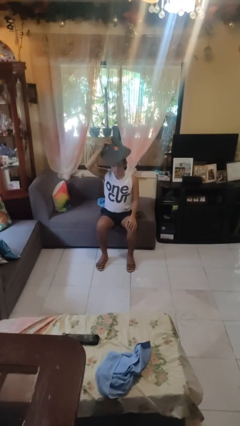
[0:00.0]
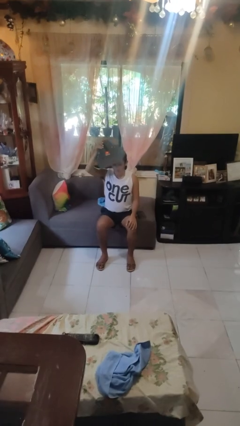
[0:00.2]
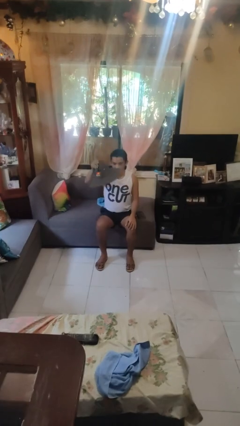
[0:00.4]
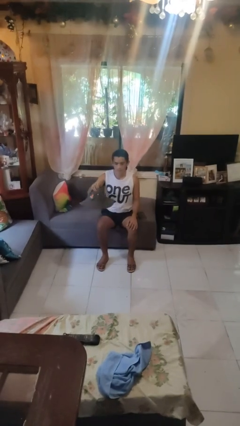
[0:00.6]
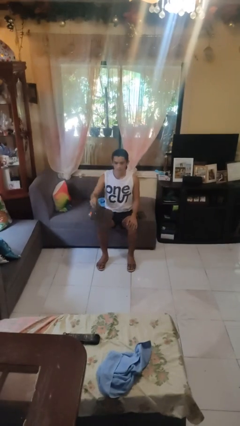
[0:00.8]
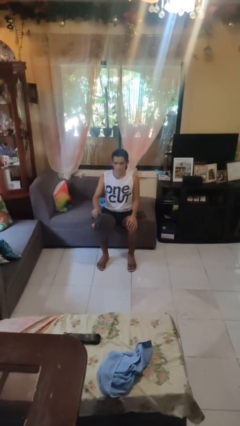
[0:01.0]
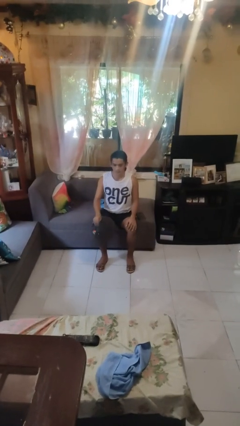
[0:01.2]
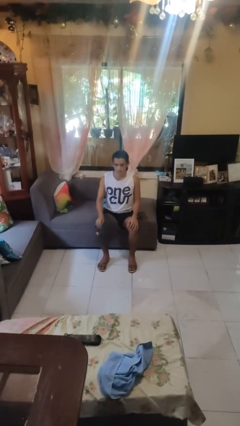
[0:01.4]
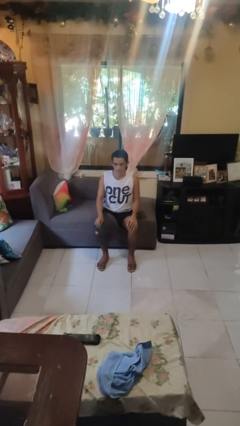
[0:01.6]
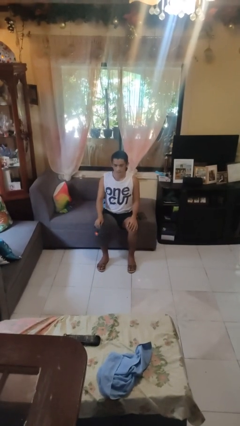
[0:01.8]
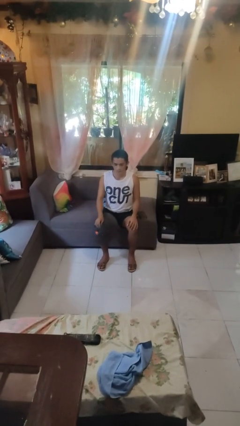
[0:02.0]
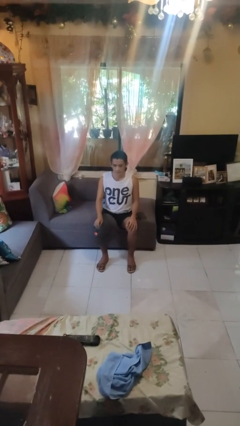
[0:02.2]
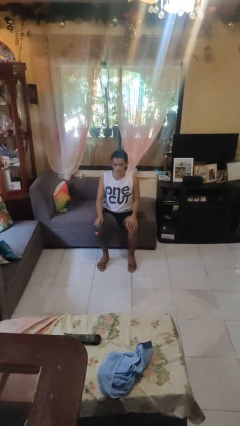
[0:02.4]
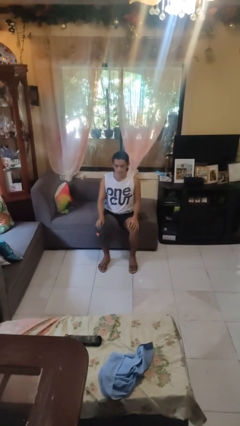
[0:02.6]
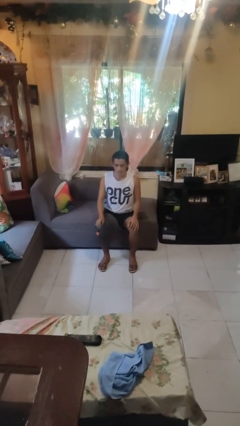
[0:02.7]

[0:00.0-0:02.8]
person takes off hat

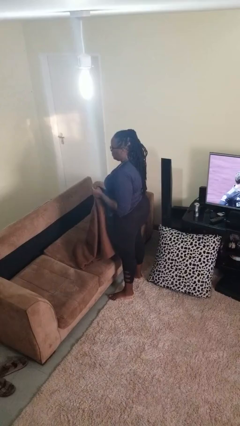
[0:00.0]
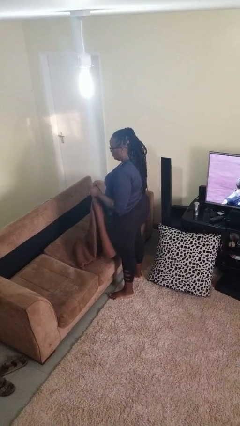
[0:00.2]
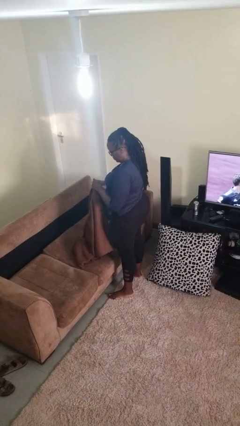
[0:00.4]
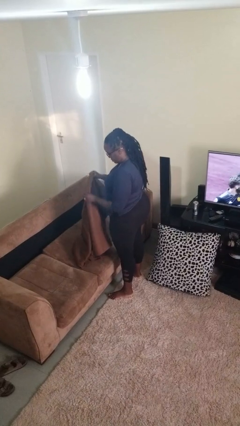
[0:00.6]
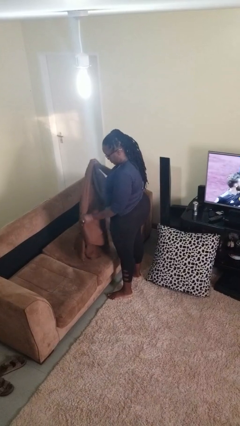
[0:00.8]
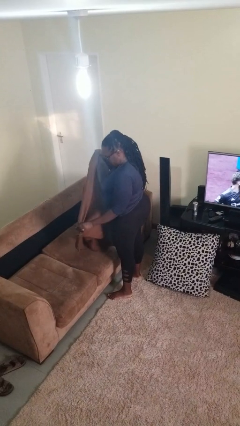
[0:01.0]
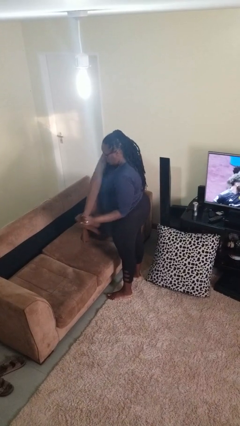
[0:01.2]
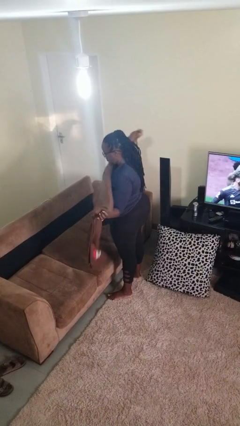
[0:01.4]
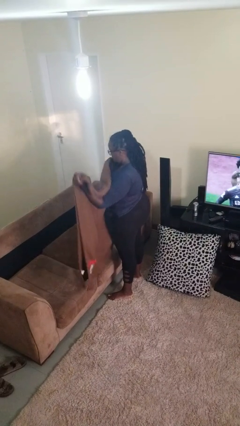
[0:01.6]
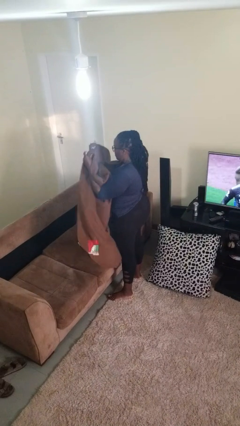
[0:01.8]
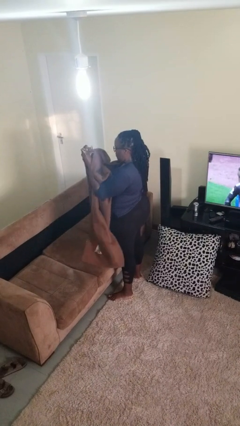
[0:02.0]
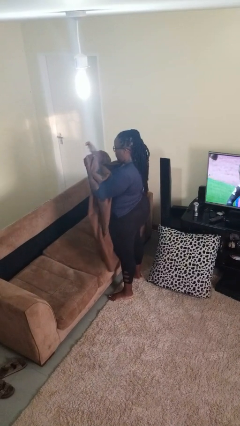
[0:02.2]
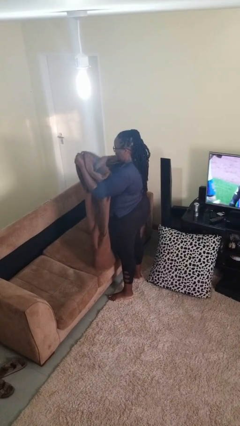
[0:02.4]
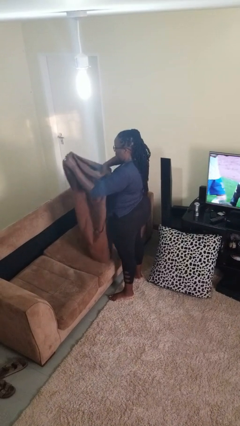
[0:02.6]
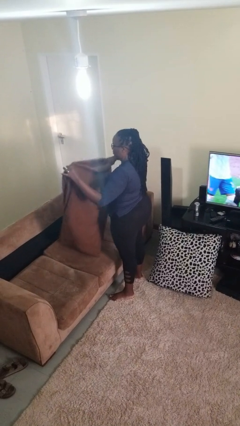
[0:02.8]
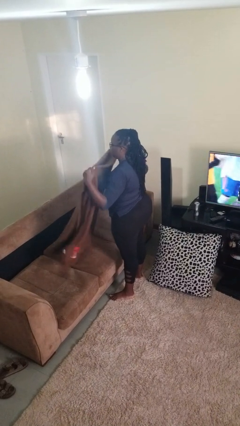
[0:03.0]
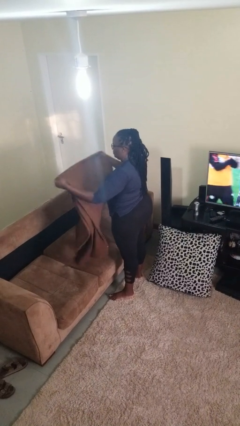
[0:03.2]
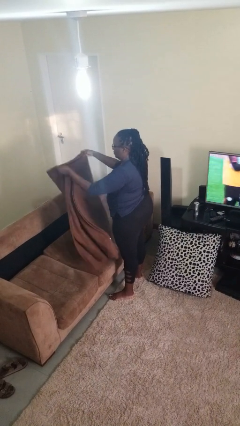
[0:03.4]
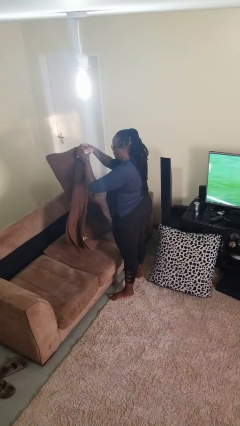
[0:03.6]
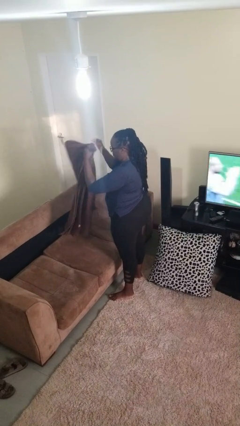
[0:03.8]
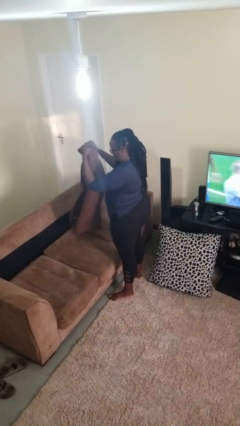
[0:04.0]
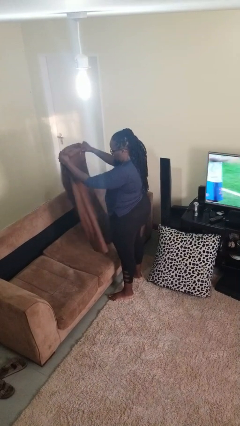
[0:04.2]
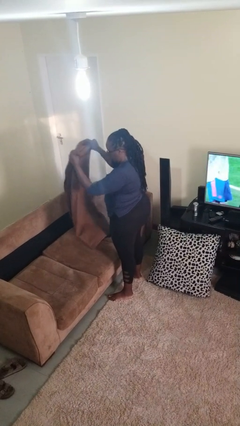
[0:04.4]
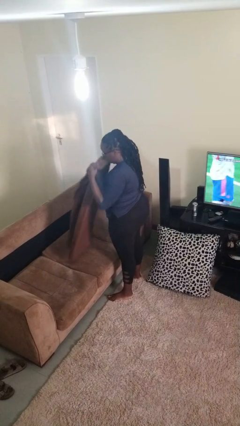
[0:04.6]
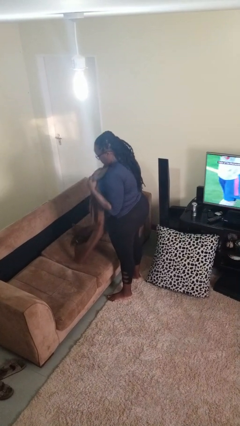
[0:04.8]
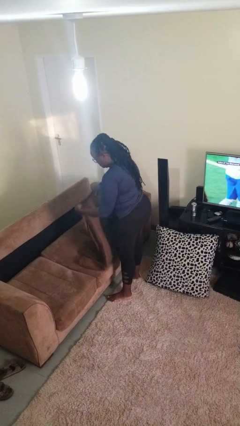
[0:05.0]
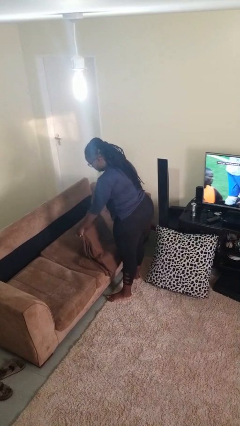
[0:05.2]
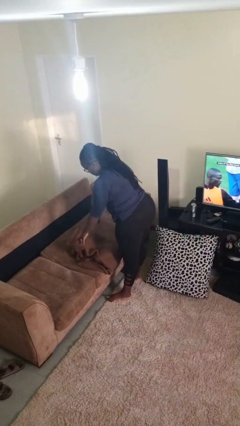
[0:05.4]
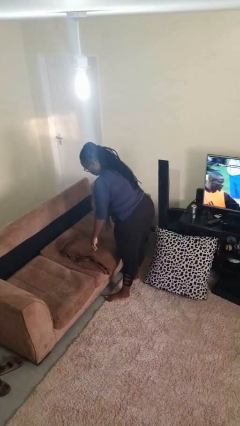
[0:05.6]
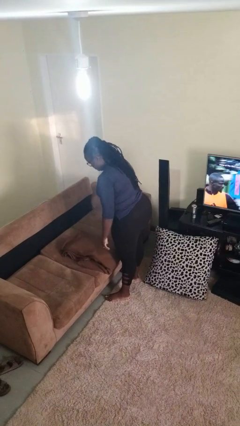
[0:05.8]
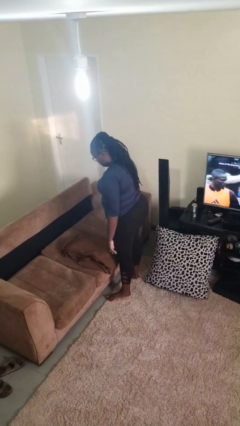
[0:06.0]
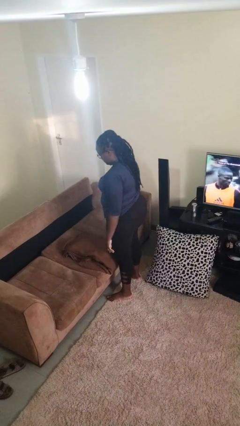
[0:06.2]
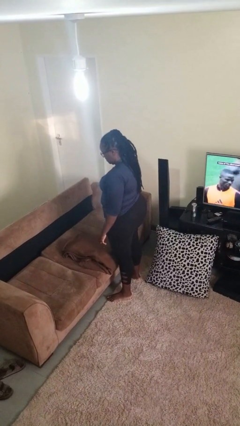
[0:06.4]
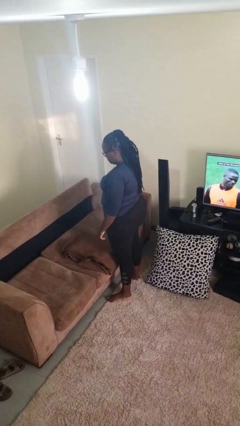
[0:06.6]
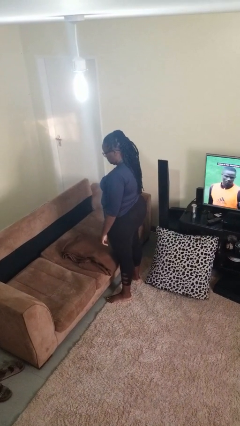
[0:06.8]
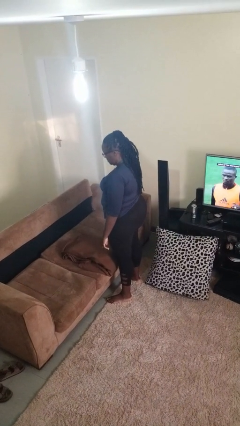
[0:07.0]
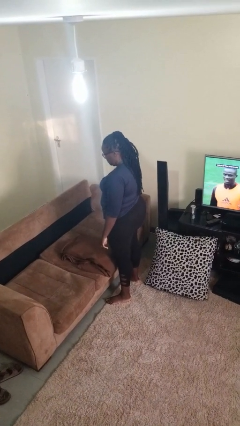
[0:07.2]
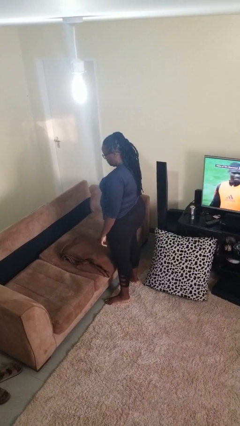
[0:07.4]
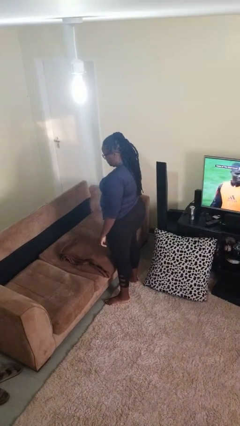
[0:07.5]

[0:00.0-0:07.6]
person folds blanket

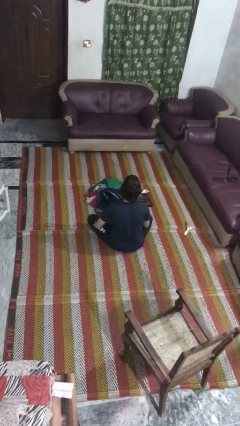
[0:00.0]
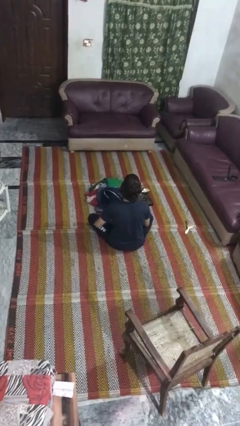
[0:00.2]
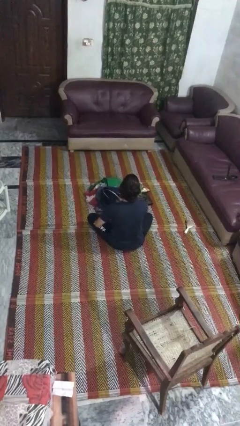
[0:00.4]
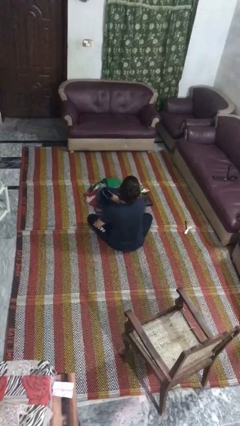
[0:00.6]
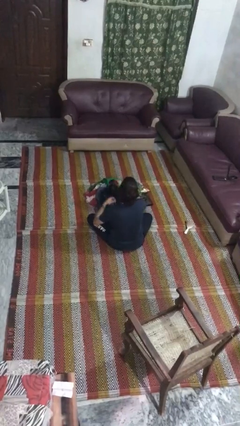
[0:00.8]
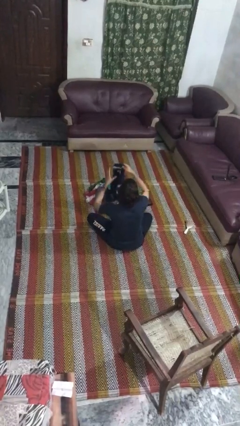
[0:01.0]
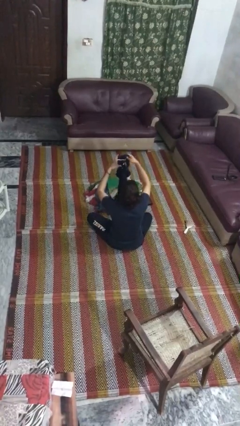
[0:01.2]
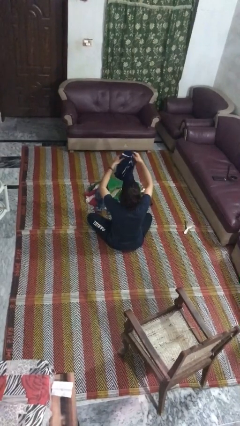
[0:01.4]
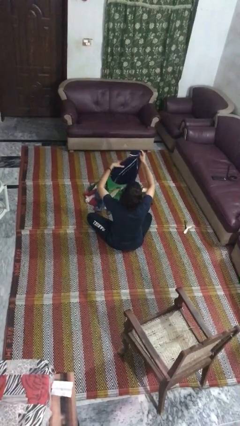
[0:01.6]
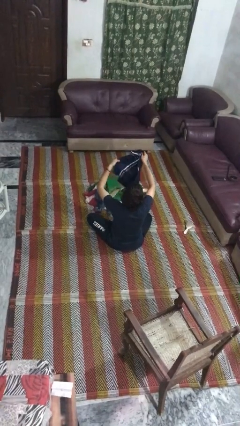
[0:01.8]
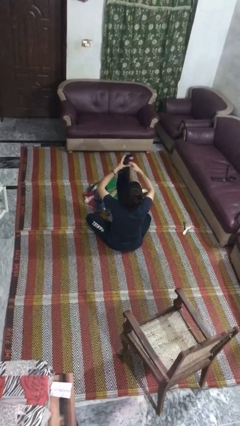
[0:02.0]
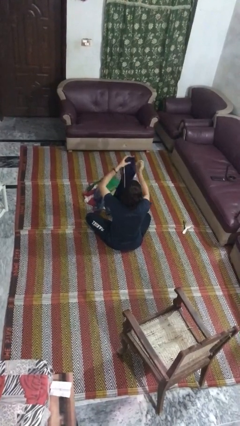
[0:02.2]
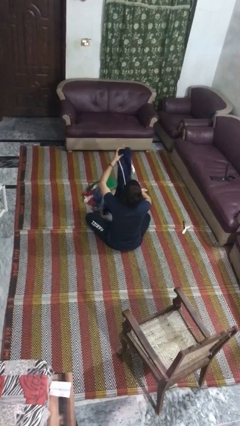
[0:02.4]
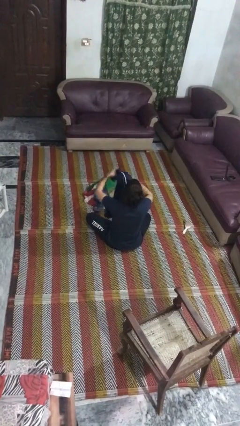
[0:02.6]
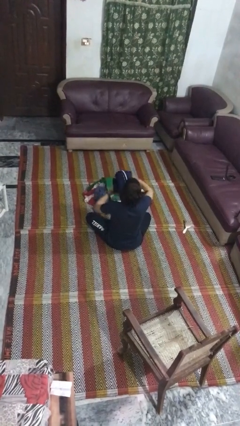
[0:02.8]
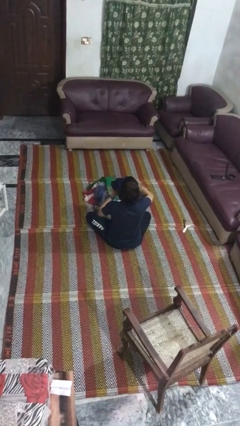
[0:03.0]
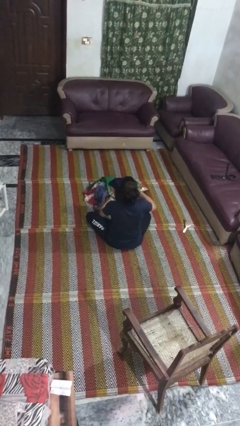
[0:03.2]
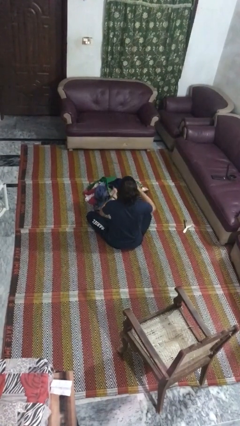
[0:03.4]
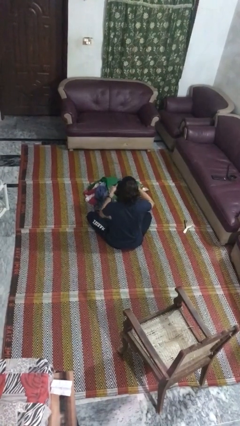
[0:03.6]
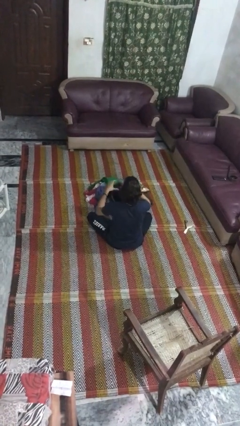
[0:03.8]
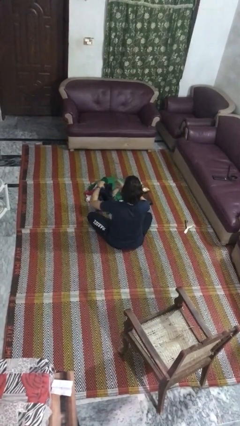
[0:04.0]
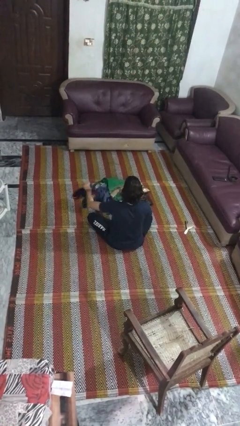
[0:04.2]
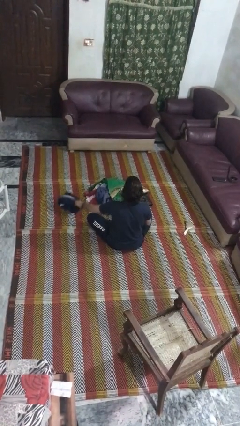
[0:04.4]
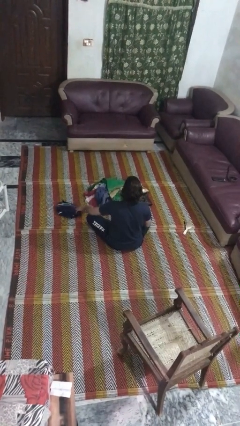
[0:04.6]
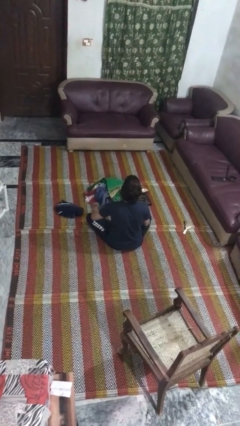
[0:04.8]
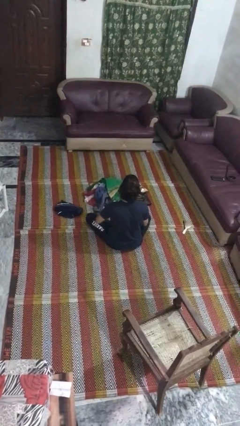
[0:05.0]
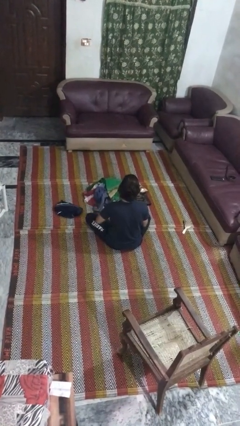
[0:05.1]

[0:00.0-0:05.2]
person folds pants

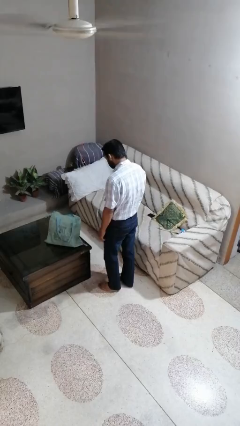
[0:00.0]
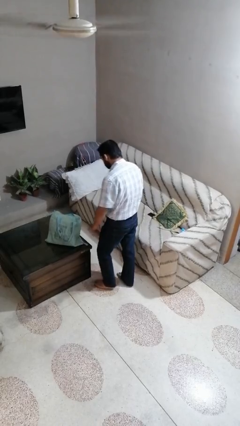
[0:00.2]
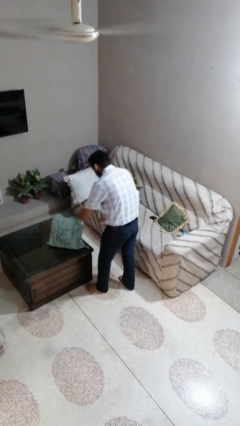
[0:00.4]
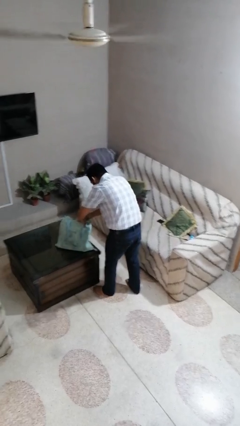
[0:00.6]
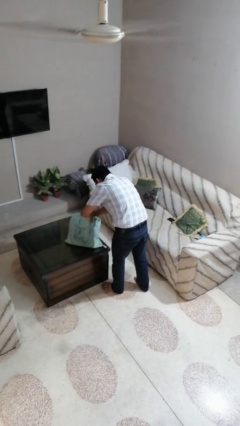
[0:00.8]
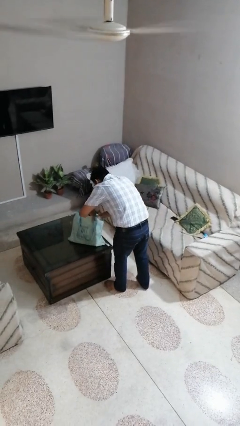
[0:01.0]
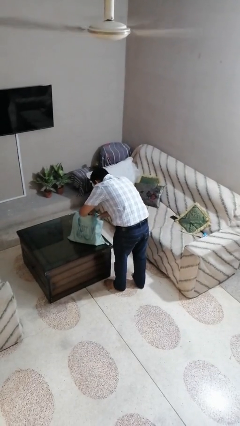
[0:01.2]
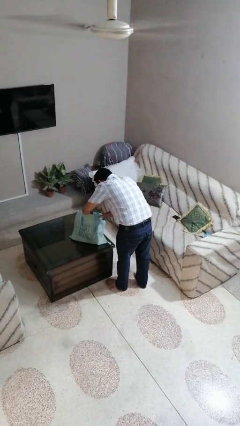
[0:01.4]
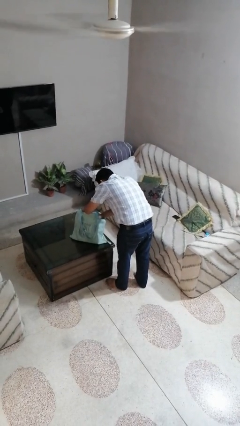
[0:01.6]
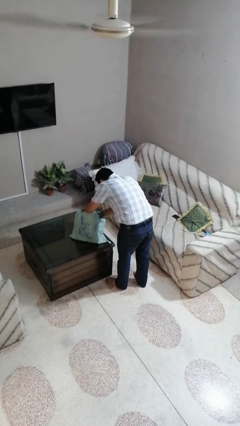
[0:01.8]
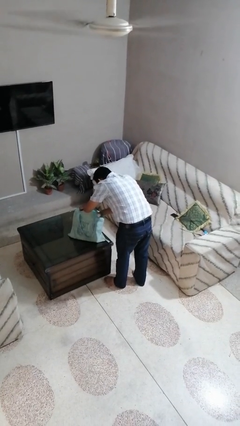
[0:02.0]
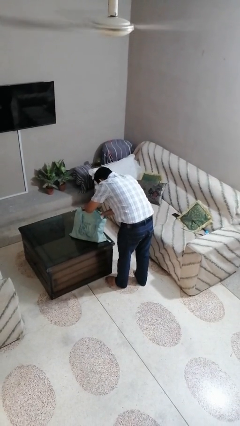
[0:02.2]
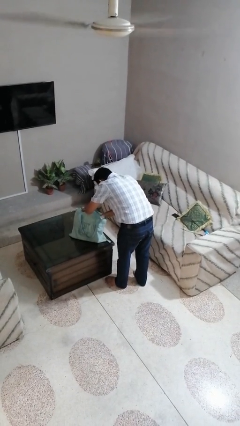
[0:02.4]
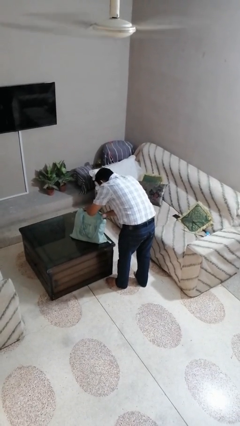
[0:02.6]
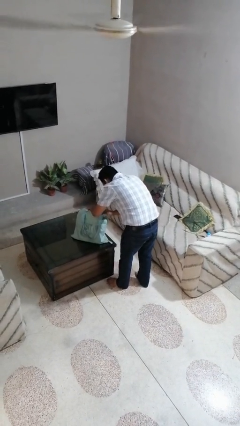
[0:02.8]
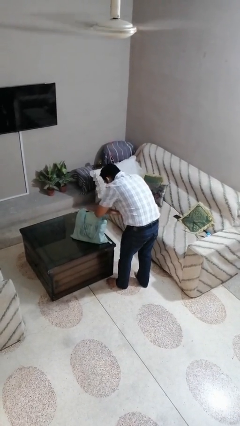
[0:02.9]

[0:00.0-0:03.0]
person searches in bag
